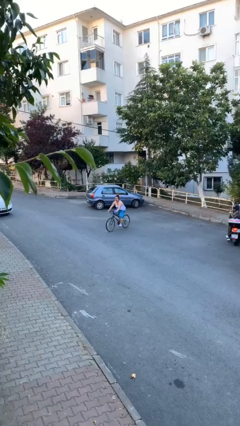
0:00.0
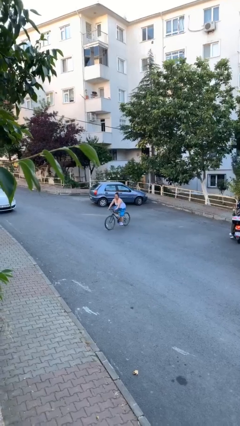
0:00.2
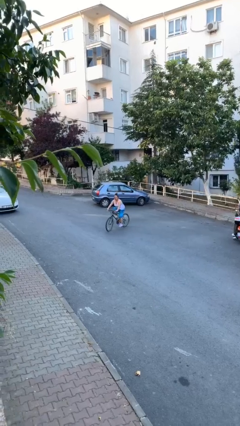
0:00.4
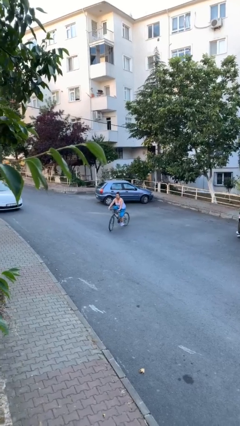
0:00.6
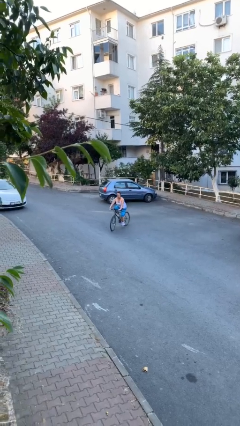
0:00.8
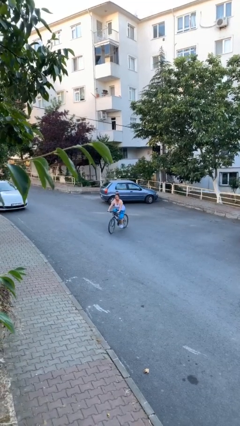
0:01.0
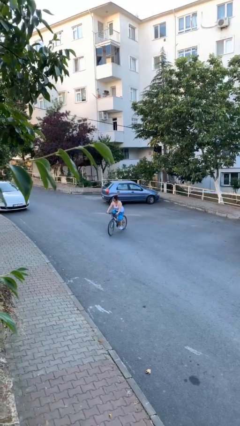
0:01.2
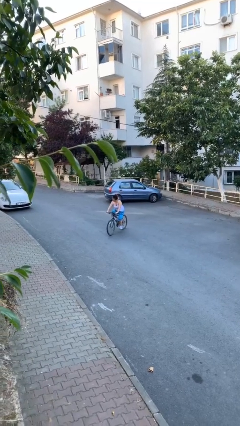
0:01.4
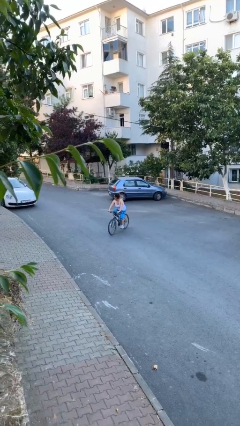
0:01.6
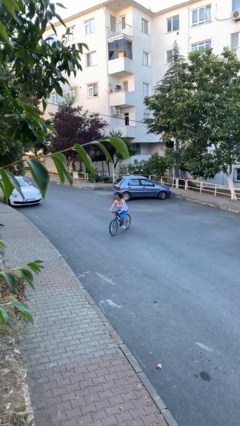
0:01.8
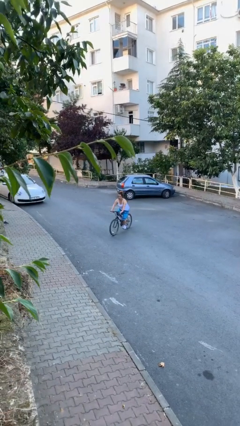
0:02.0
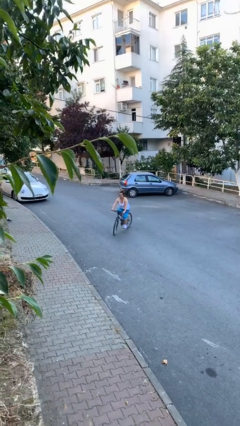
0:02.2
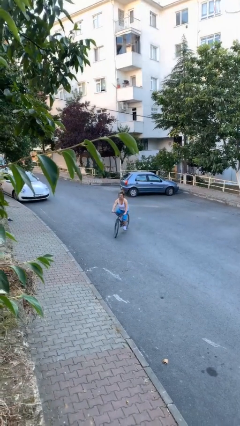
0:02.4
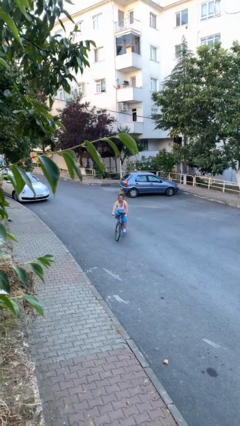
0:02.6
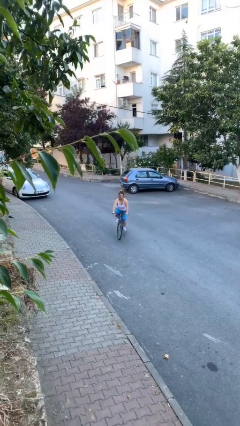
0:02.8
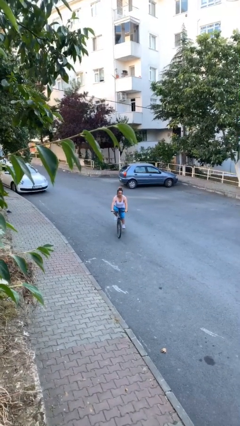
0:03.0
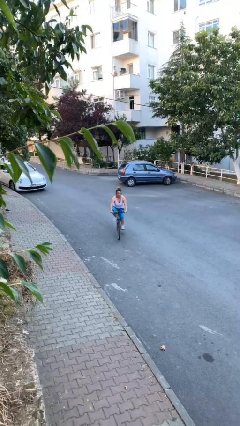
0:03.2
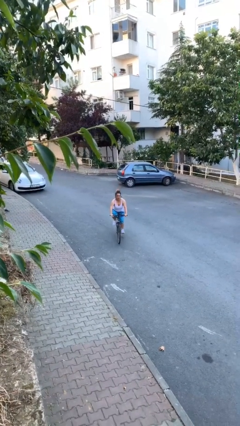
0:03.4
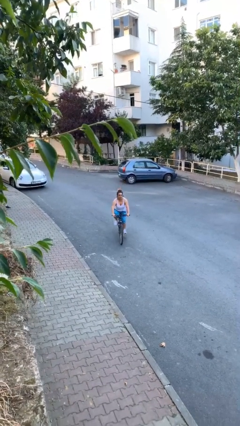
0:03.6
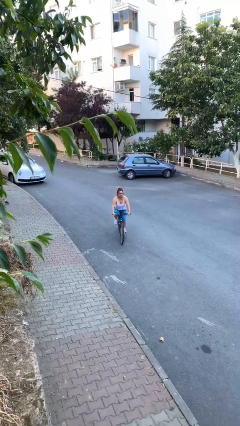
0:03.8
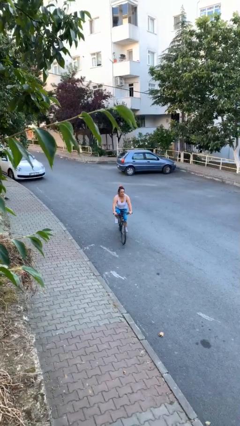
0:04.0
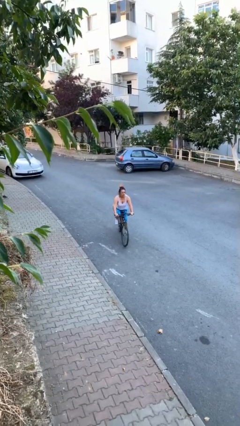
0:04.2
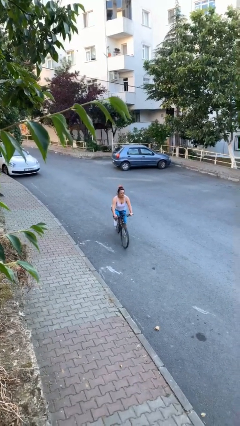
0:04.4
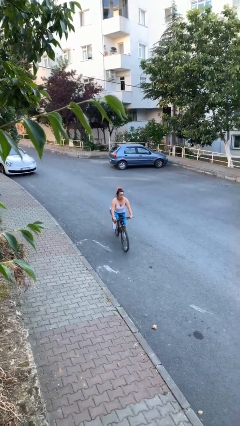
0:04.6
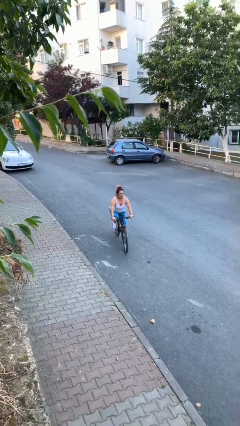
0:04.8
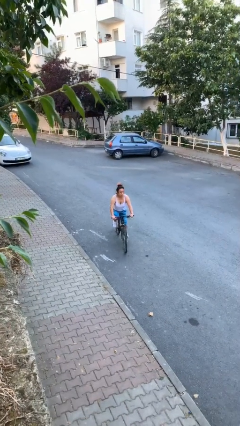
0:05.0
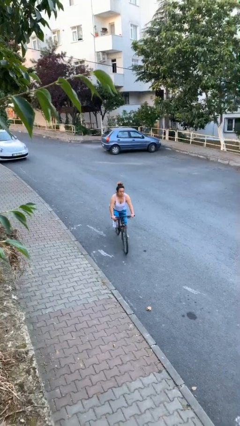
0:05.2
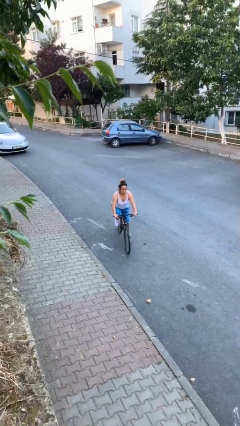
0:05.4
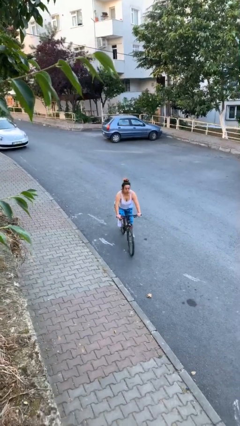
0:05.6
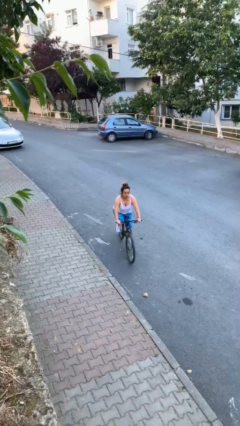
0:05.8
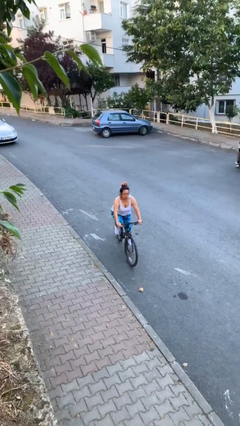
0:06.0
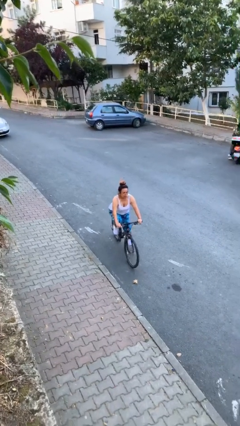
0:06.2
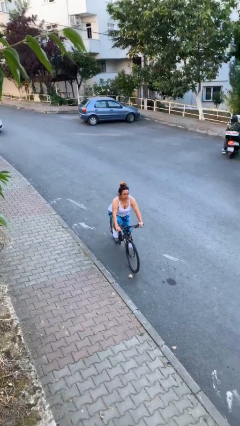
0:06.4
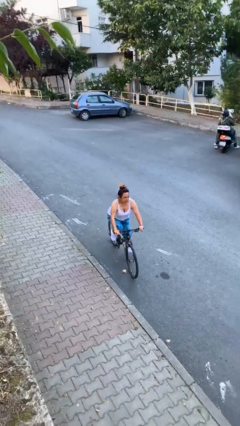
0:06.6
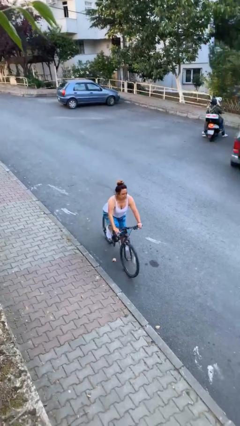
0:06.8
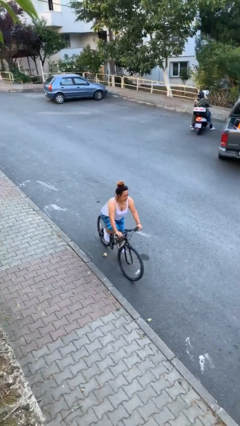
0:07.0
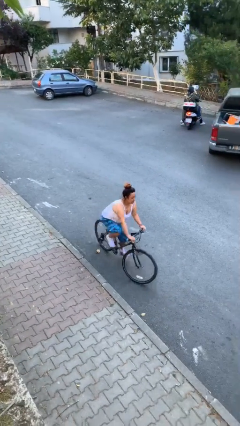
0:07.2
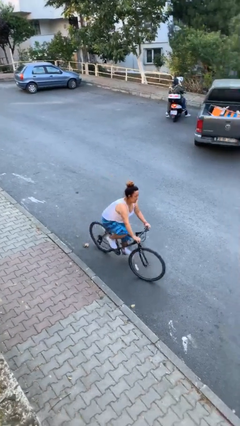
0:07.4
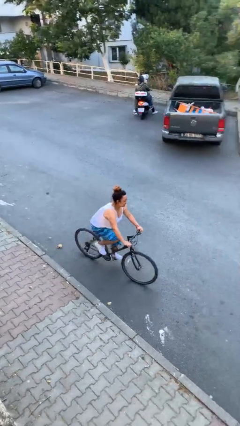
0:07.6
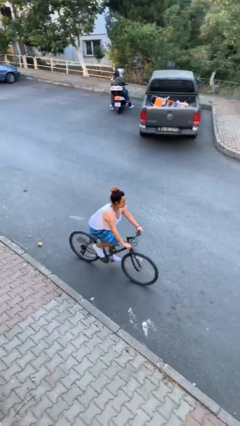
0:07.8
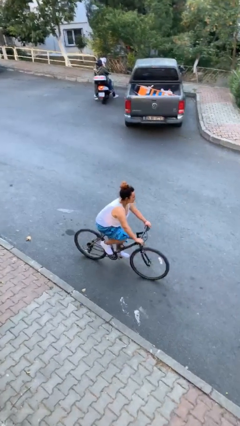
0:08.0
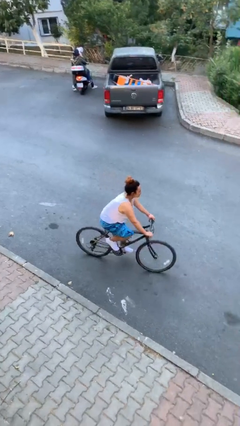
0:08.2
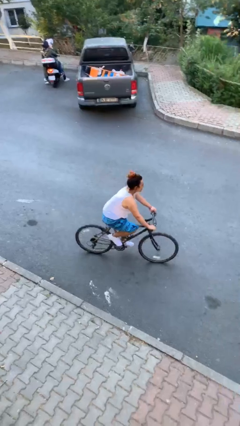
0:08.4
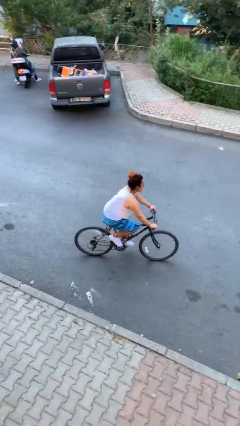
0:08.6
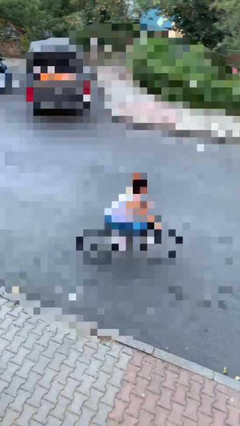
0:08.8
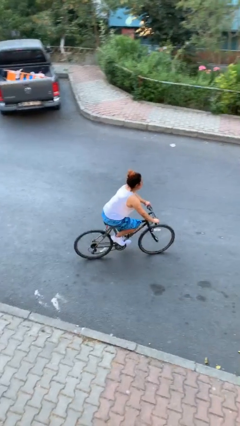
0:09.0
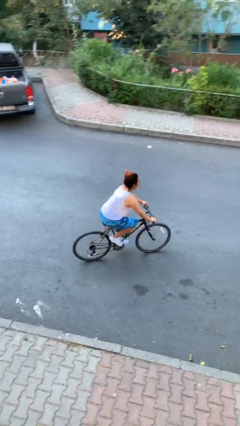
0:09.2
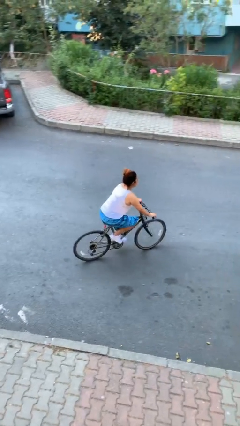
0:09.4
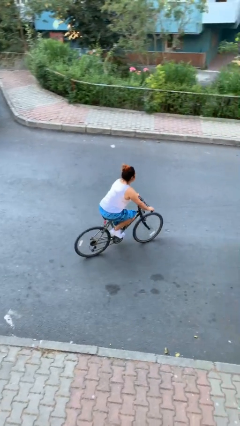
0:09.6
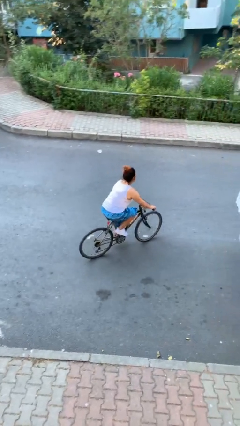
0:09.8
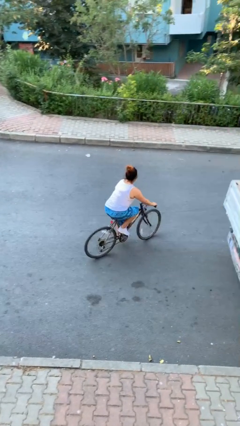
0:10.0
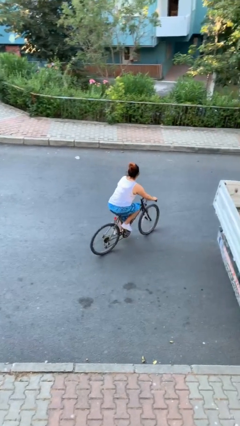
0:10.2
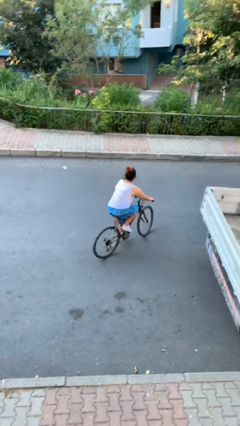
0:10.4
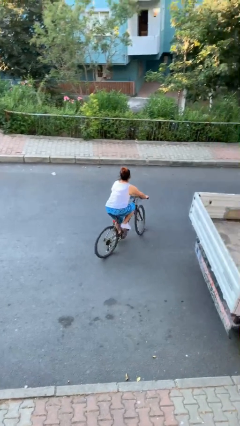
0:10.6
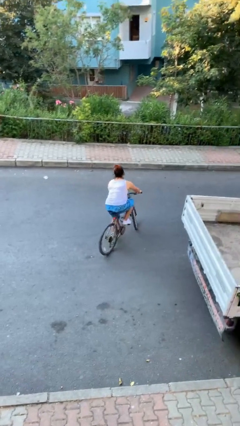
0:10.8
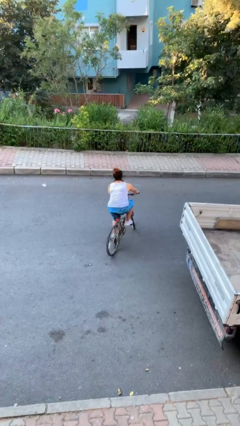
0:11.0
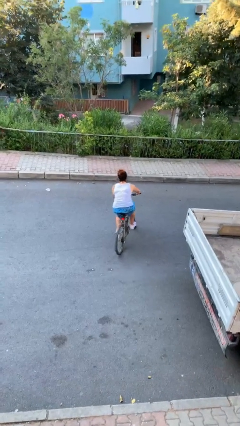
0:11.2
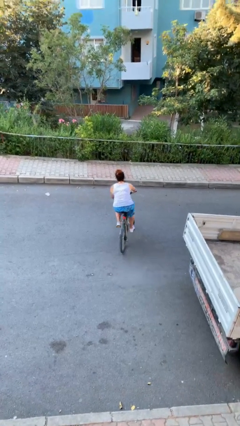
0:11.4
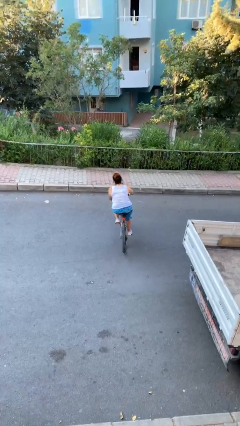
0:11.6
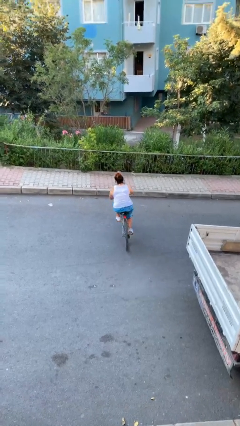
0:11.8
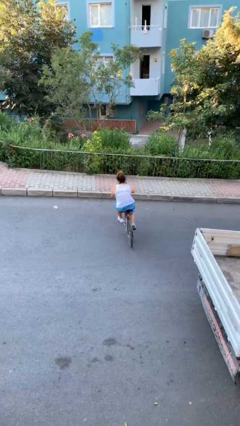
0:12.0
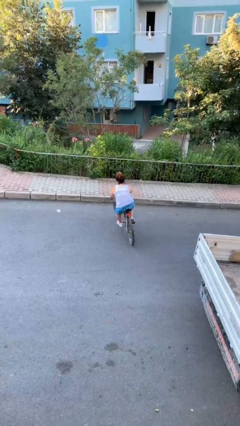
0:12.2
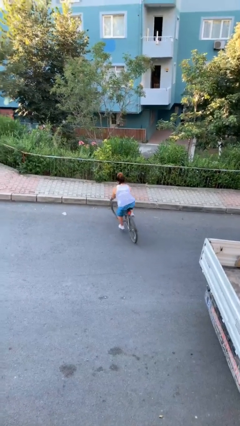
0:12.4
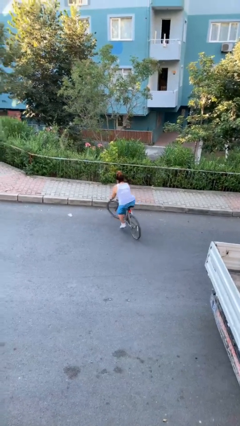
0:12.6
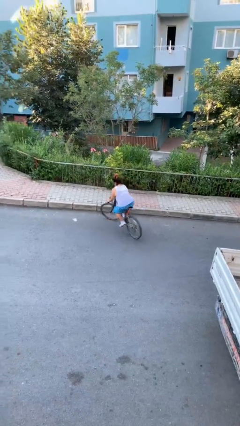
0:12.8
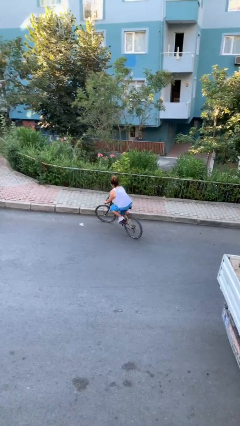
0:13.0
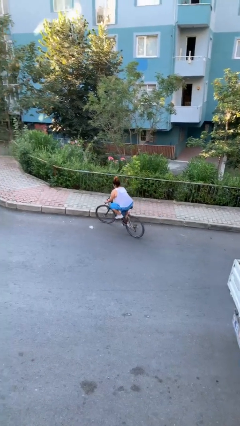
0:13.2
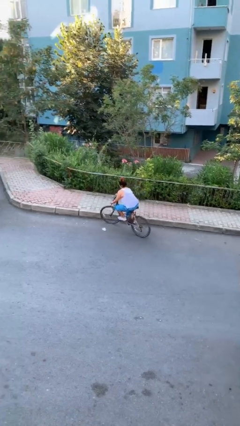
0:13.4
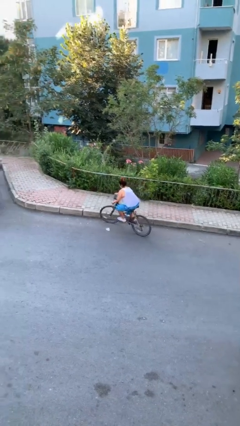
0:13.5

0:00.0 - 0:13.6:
person rides bicycle

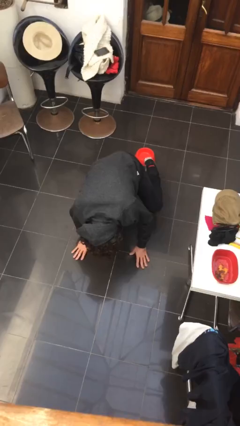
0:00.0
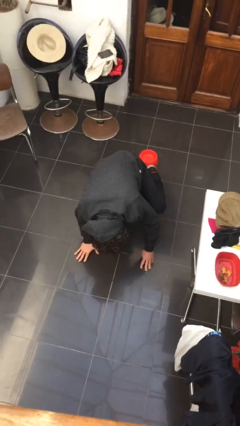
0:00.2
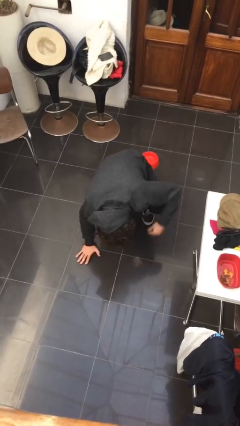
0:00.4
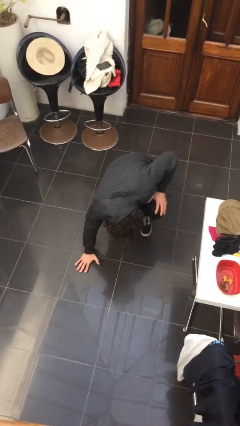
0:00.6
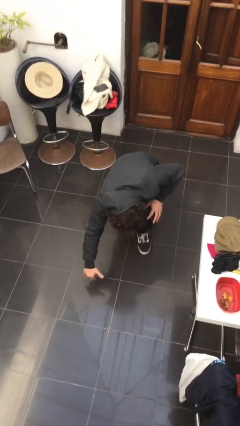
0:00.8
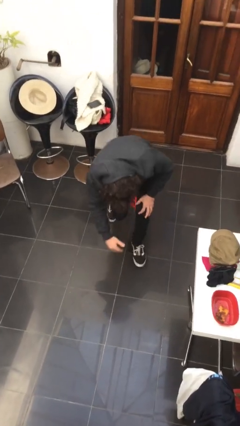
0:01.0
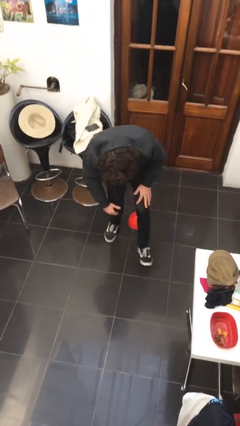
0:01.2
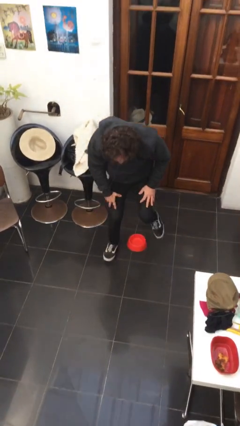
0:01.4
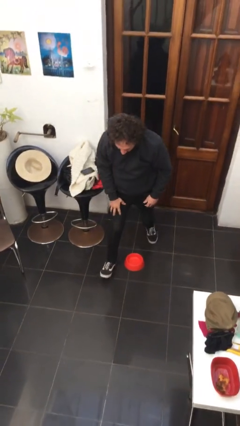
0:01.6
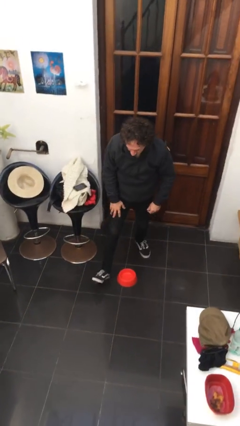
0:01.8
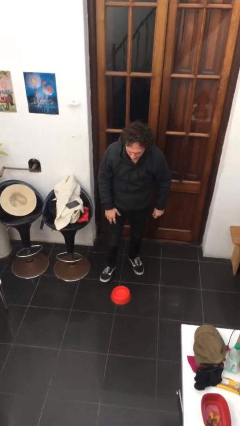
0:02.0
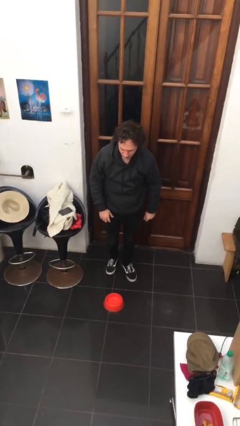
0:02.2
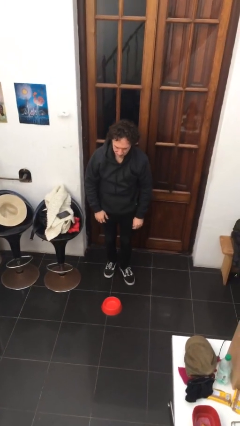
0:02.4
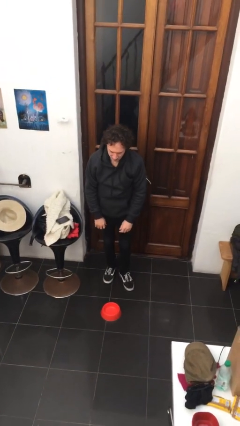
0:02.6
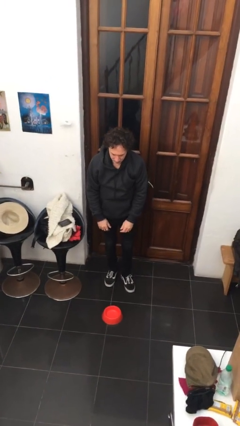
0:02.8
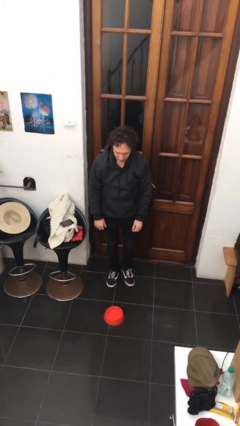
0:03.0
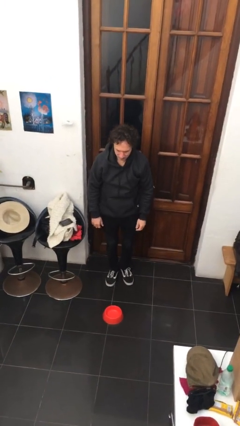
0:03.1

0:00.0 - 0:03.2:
person stands up from floor

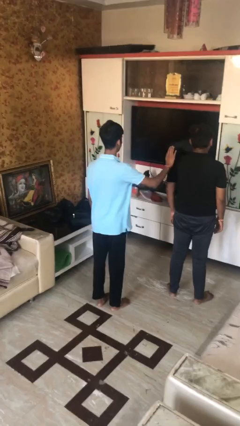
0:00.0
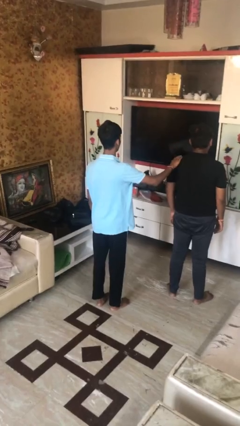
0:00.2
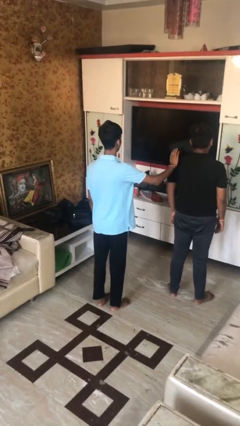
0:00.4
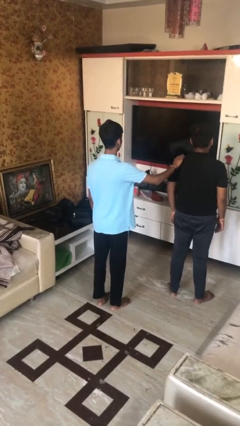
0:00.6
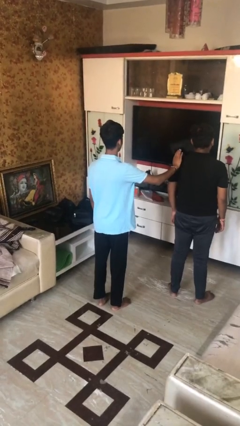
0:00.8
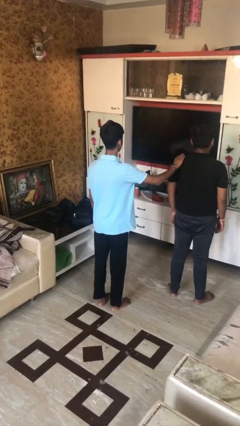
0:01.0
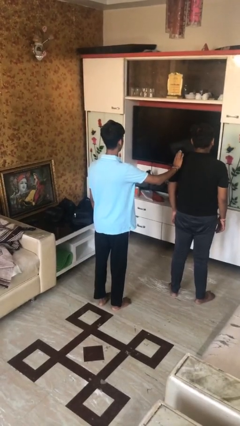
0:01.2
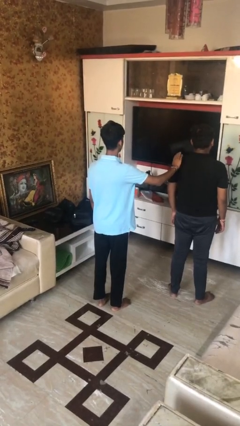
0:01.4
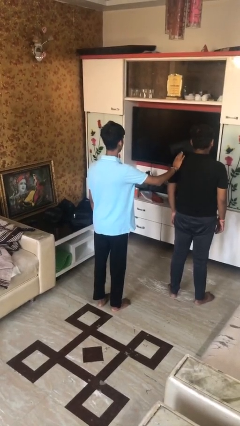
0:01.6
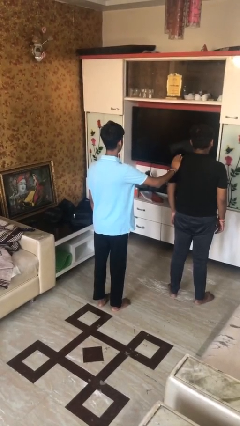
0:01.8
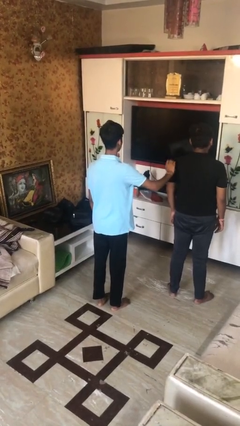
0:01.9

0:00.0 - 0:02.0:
person pounds shoulders of person
